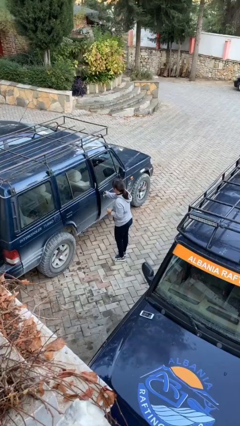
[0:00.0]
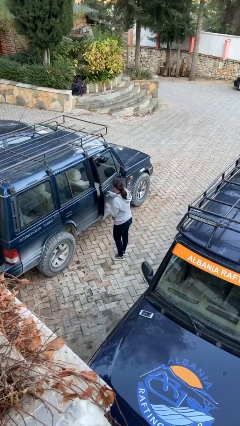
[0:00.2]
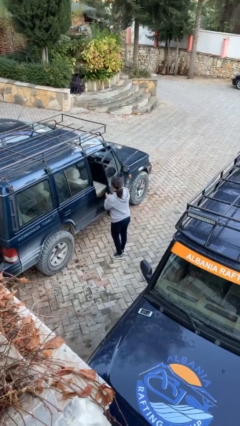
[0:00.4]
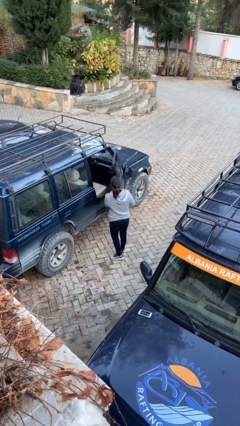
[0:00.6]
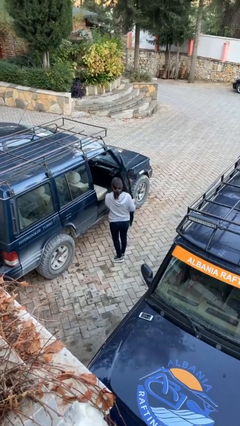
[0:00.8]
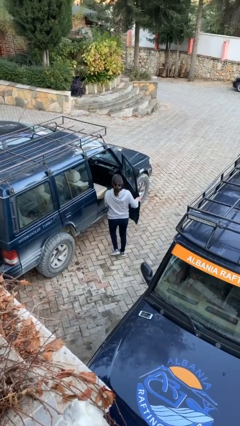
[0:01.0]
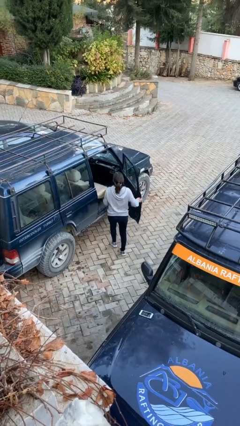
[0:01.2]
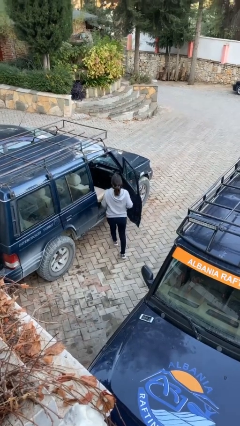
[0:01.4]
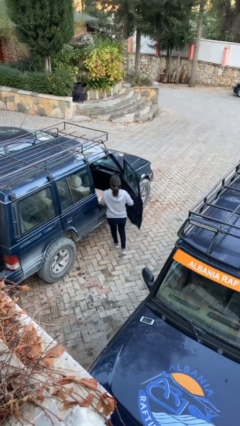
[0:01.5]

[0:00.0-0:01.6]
person opens car door

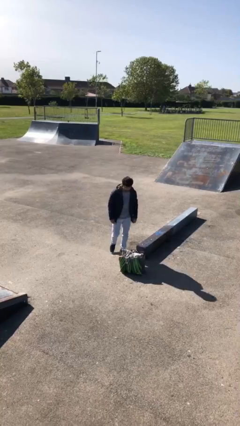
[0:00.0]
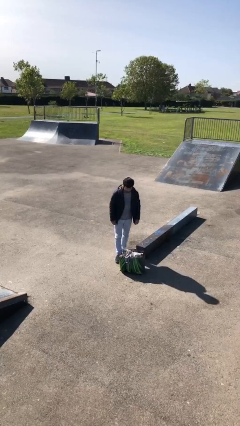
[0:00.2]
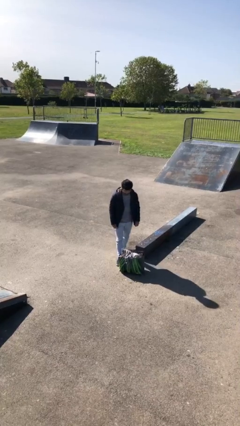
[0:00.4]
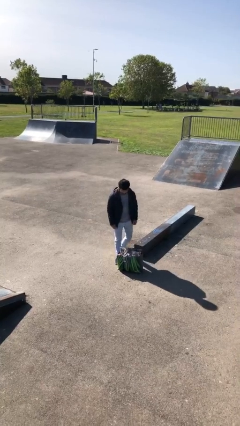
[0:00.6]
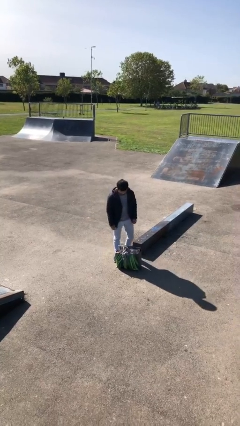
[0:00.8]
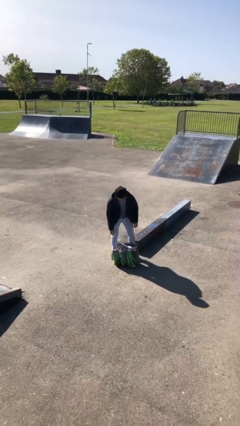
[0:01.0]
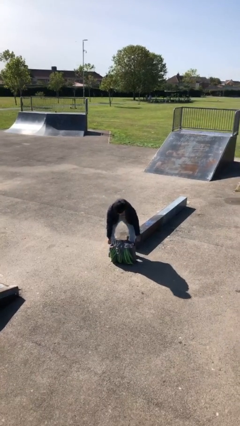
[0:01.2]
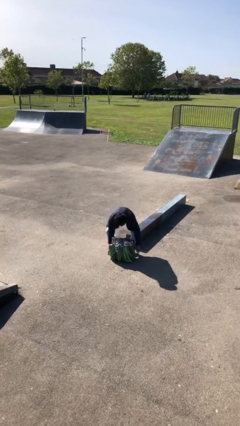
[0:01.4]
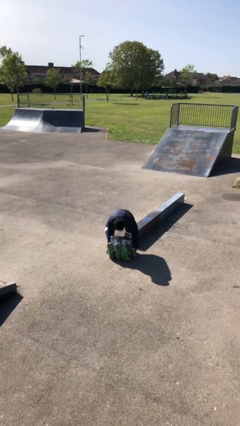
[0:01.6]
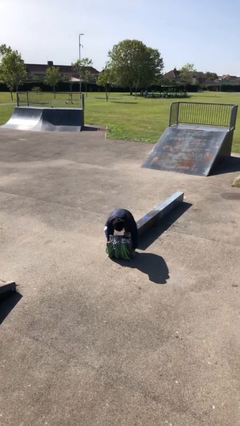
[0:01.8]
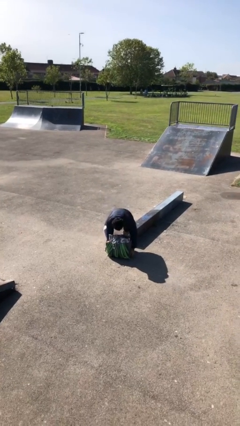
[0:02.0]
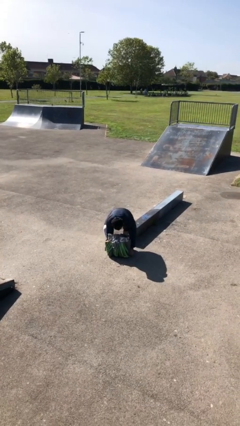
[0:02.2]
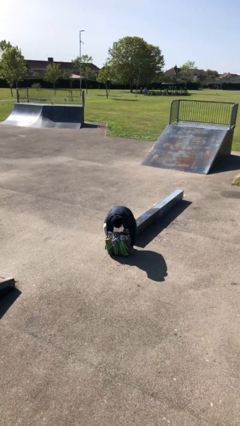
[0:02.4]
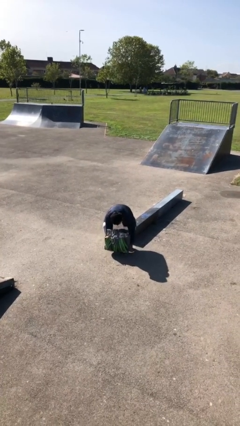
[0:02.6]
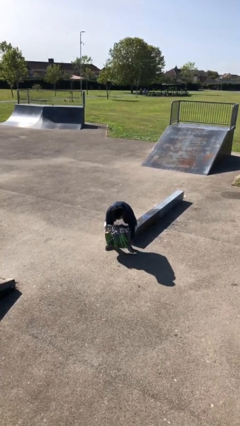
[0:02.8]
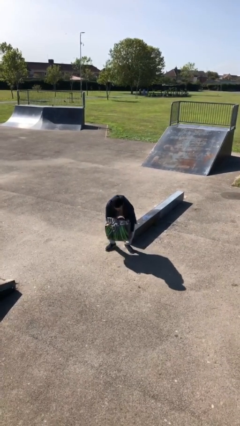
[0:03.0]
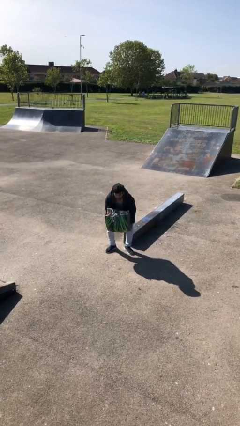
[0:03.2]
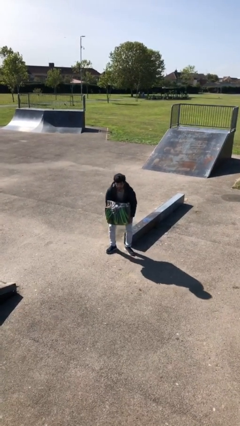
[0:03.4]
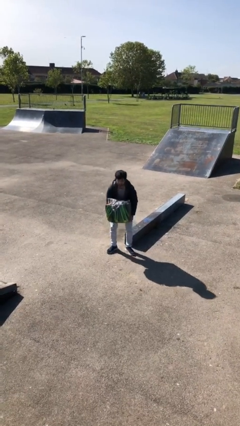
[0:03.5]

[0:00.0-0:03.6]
person picks up object from floor

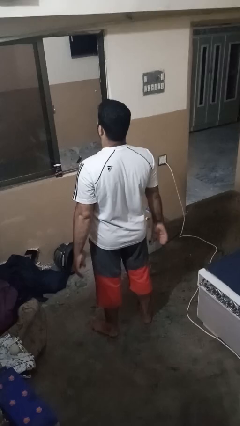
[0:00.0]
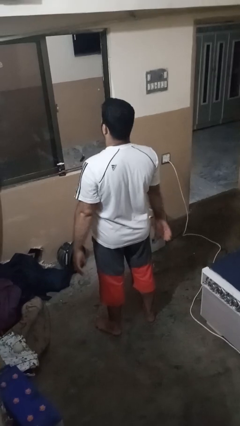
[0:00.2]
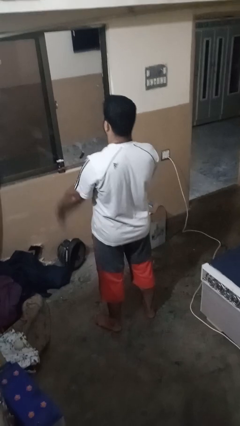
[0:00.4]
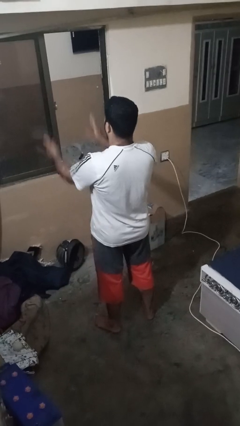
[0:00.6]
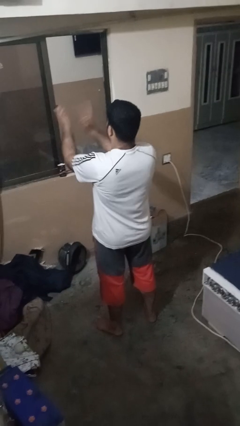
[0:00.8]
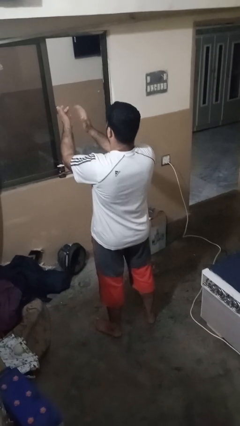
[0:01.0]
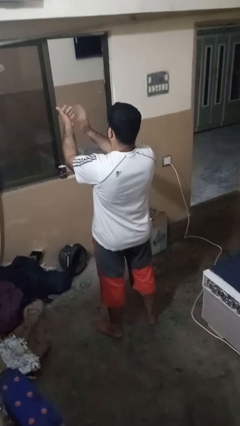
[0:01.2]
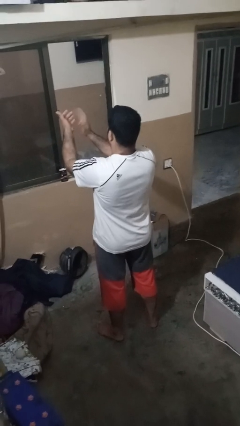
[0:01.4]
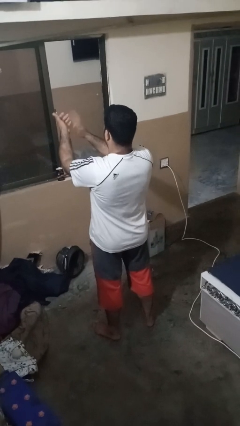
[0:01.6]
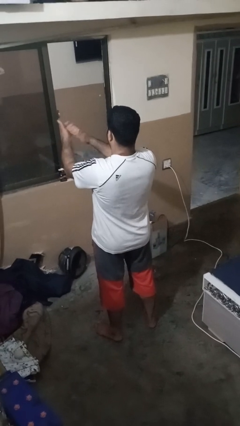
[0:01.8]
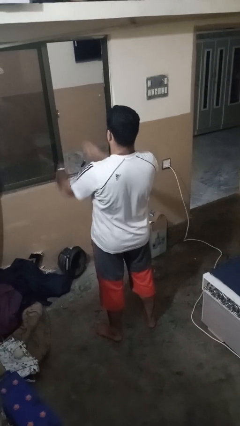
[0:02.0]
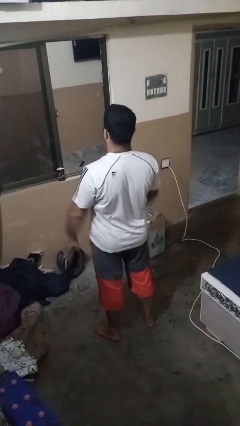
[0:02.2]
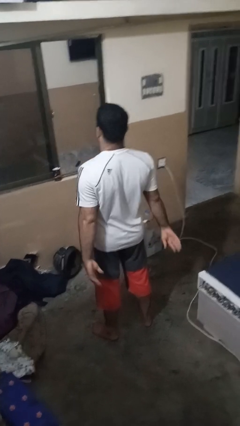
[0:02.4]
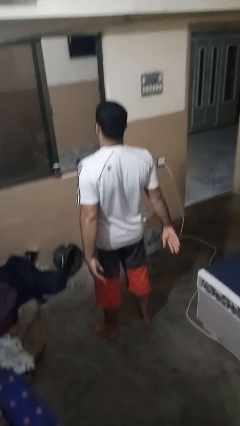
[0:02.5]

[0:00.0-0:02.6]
person claps hands

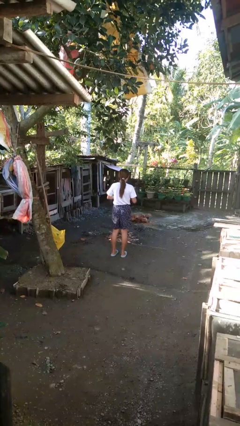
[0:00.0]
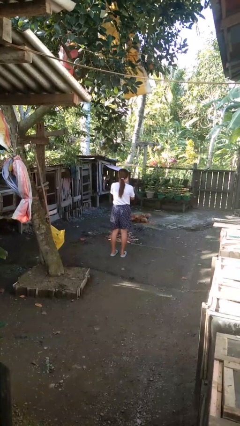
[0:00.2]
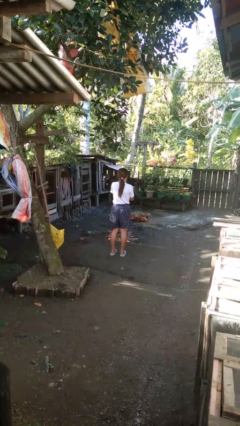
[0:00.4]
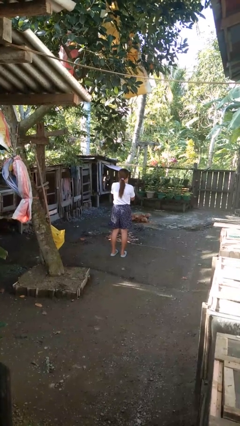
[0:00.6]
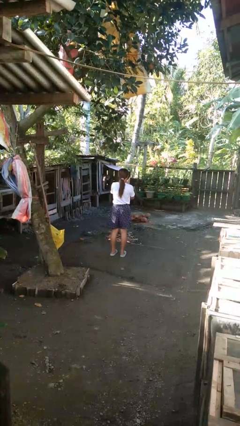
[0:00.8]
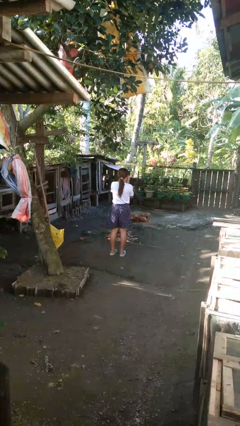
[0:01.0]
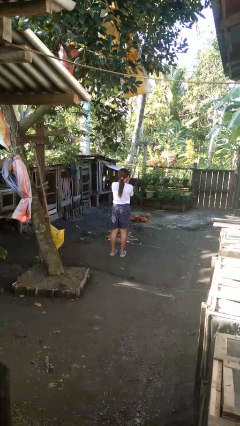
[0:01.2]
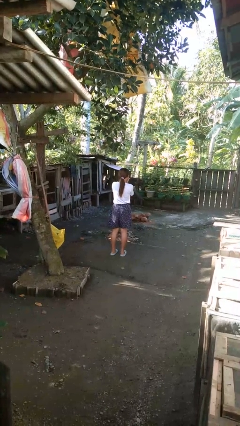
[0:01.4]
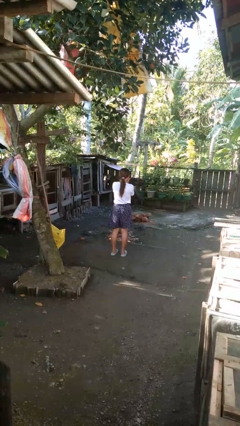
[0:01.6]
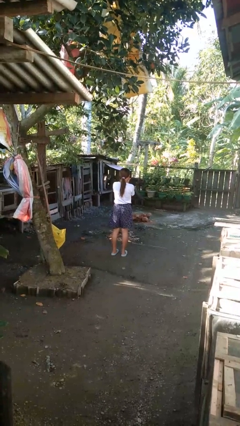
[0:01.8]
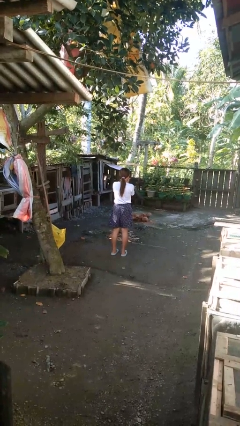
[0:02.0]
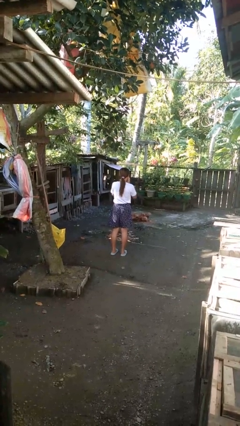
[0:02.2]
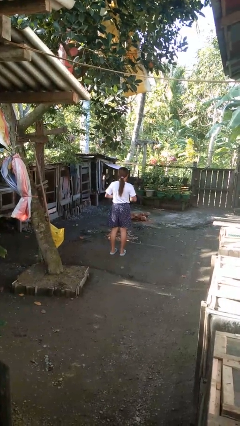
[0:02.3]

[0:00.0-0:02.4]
person blows into hands

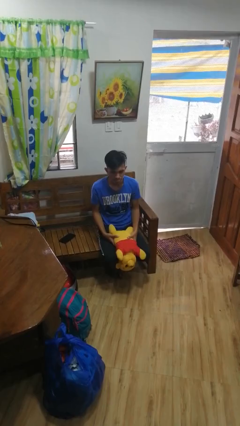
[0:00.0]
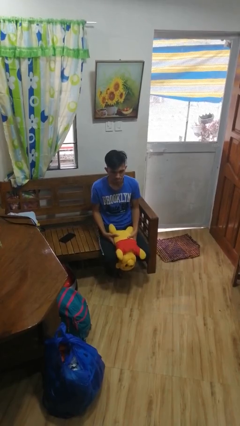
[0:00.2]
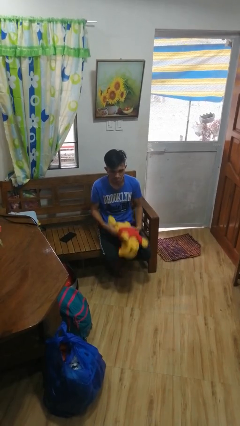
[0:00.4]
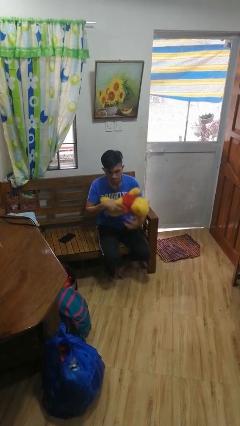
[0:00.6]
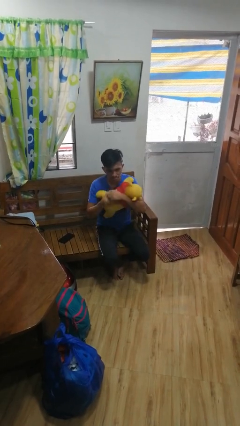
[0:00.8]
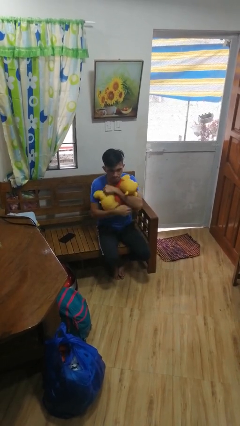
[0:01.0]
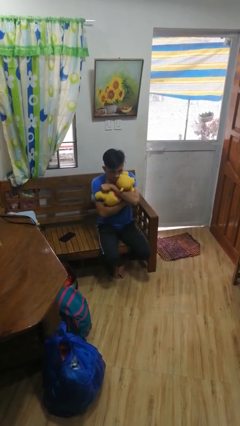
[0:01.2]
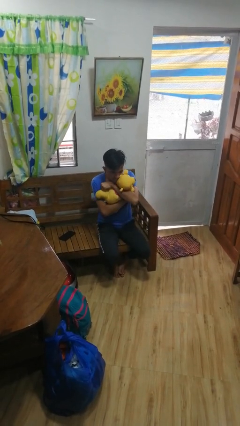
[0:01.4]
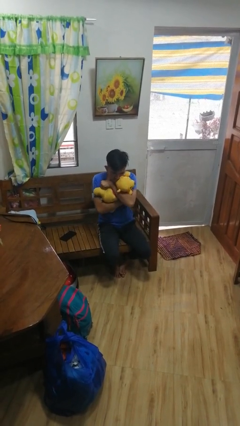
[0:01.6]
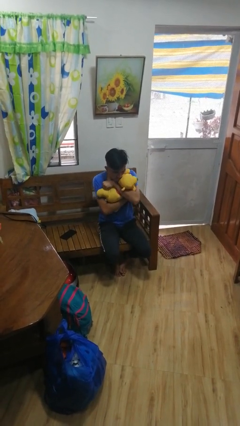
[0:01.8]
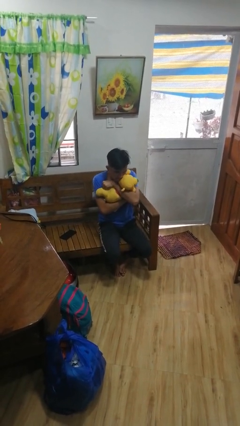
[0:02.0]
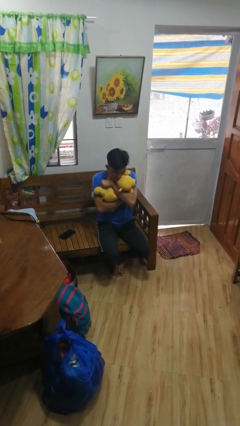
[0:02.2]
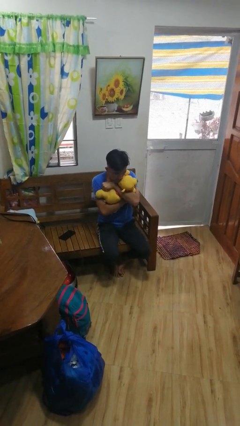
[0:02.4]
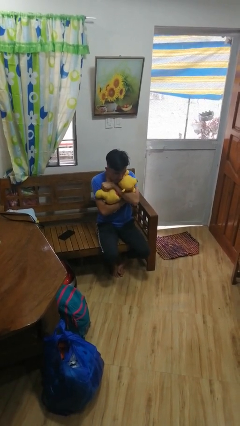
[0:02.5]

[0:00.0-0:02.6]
person hugs stuffed animal

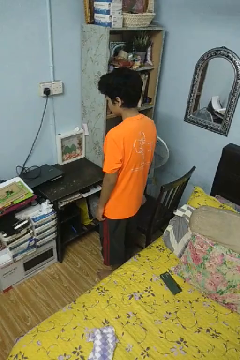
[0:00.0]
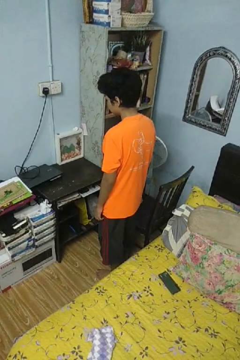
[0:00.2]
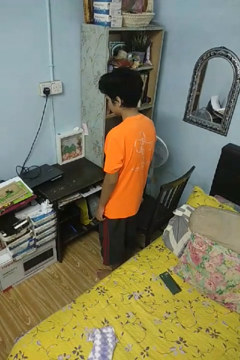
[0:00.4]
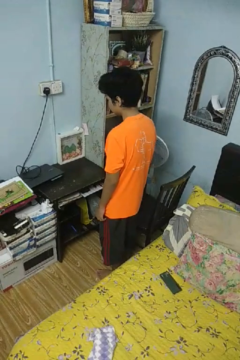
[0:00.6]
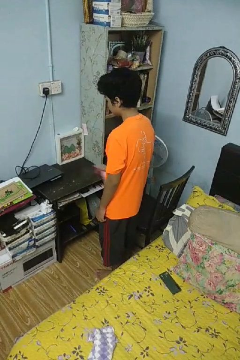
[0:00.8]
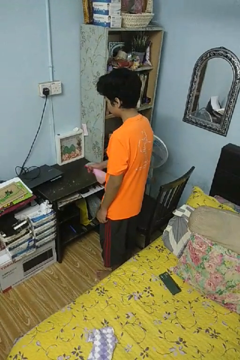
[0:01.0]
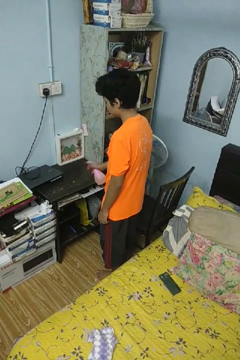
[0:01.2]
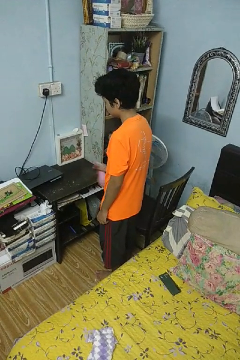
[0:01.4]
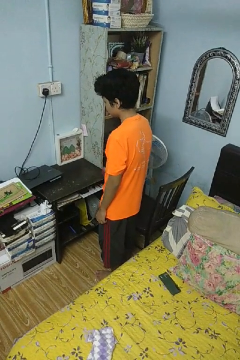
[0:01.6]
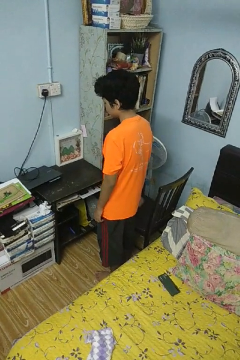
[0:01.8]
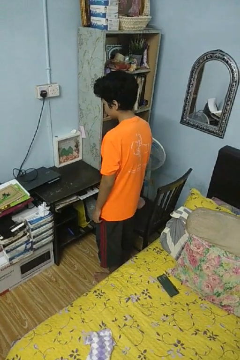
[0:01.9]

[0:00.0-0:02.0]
person sprays from bottle

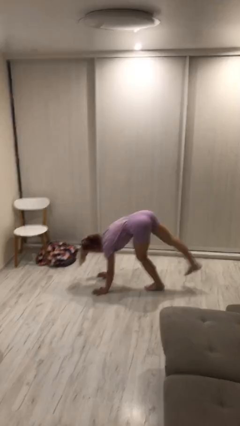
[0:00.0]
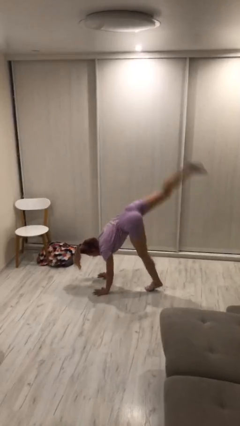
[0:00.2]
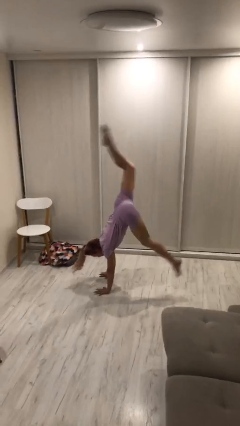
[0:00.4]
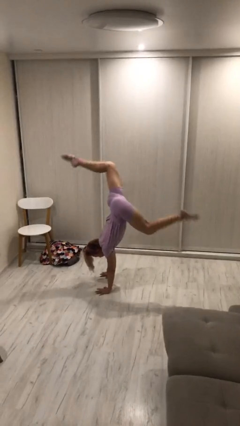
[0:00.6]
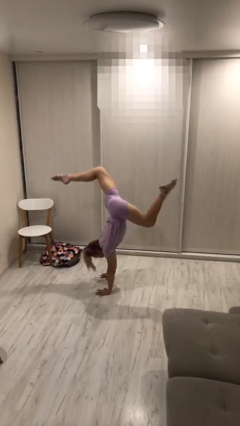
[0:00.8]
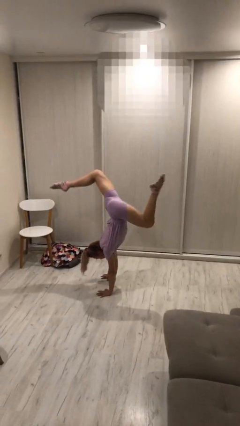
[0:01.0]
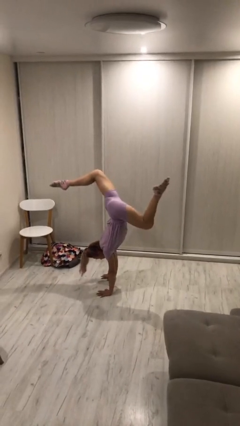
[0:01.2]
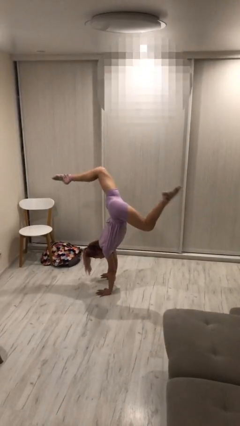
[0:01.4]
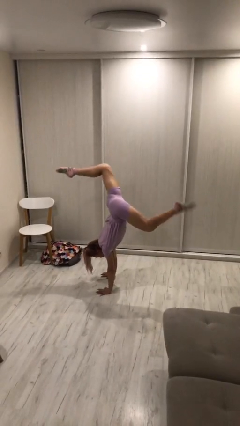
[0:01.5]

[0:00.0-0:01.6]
person handstand

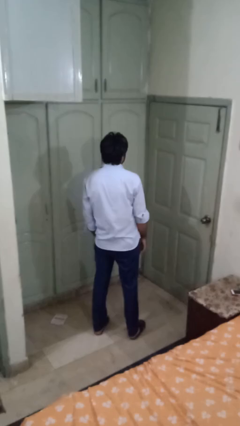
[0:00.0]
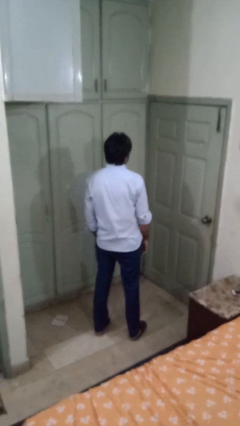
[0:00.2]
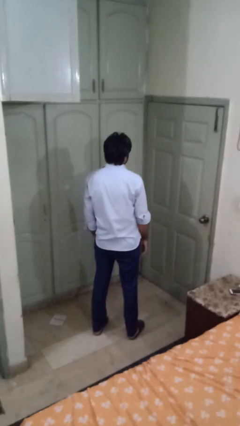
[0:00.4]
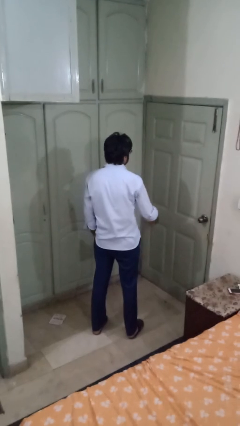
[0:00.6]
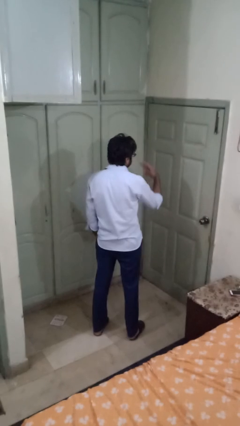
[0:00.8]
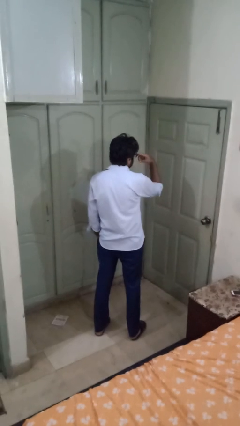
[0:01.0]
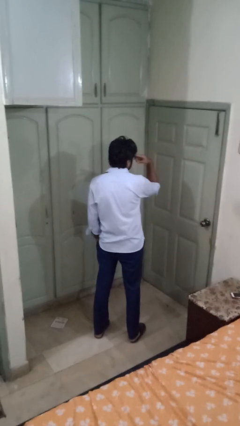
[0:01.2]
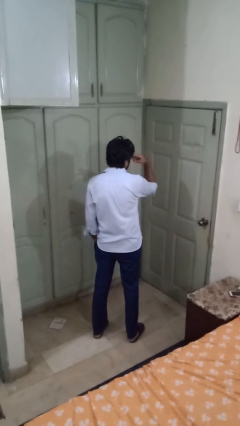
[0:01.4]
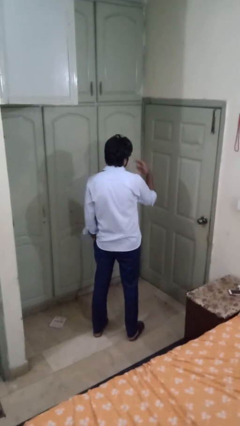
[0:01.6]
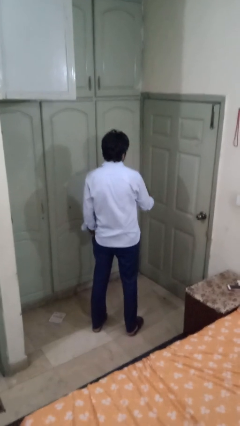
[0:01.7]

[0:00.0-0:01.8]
person gestures watch closely
